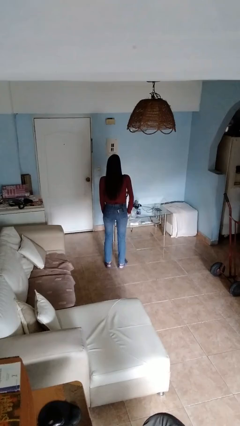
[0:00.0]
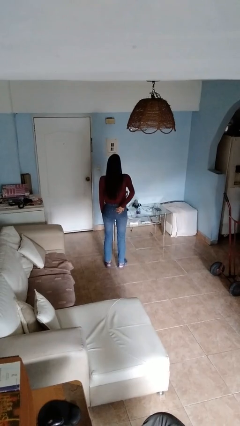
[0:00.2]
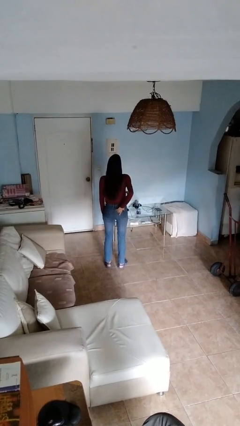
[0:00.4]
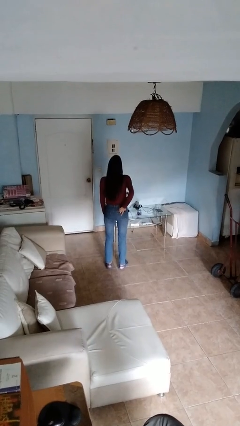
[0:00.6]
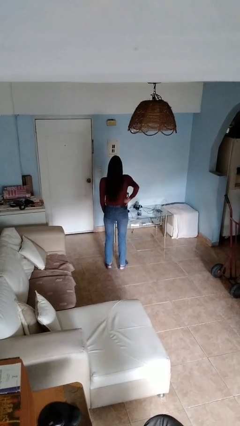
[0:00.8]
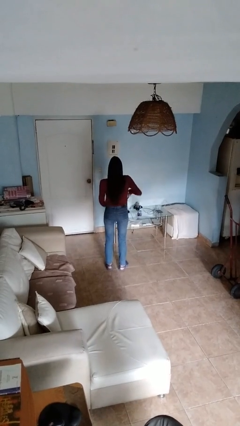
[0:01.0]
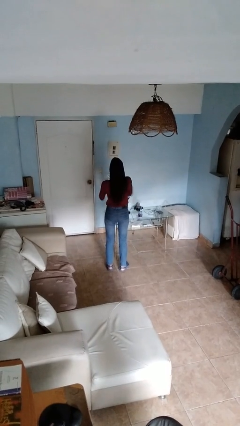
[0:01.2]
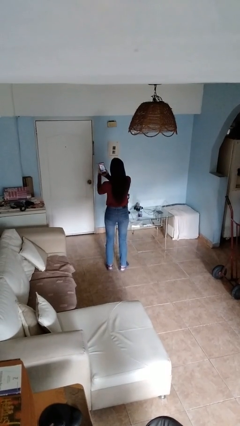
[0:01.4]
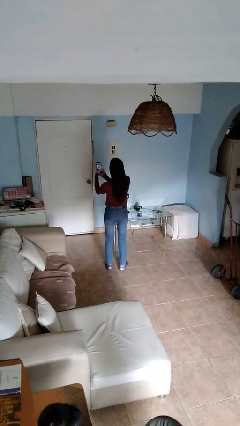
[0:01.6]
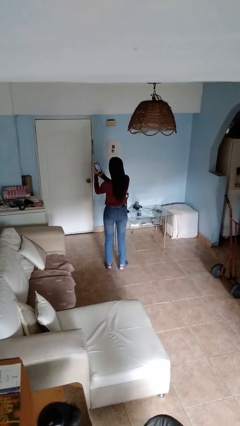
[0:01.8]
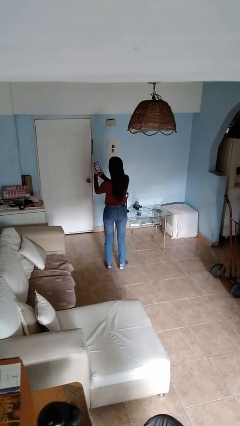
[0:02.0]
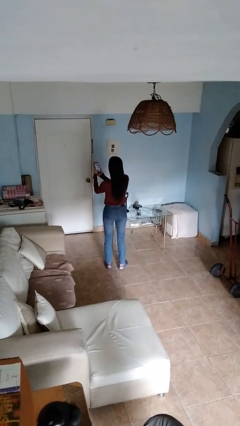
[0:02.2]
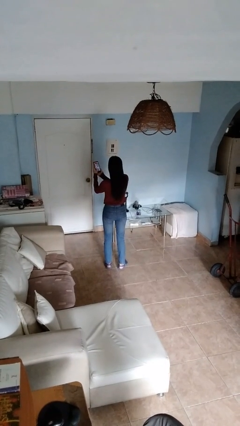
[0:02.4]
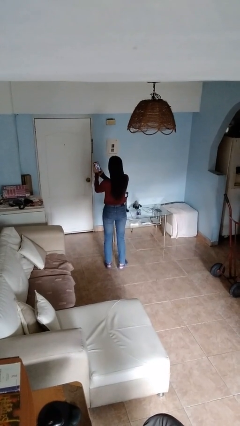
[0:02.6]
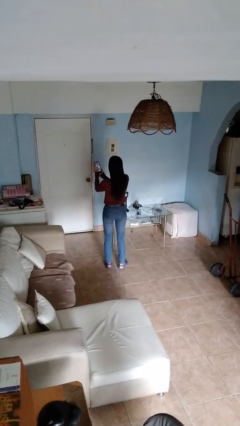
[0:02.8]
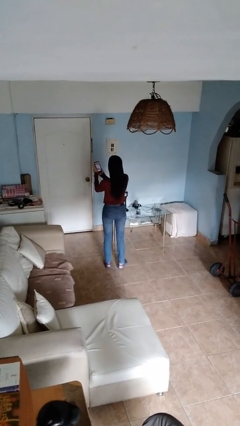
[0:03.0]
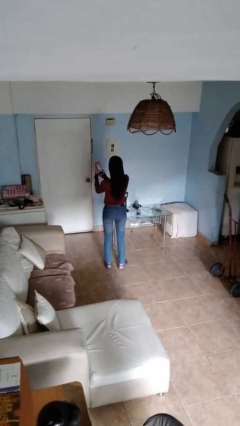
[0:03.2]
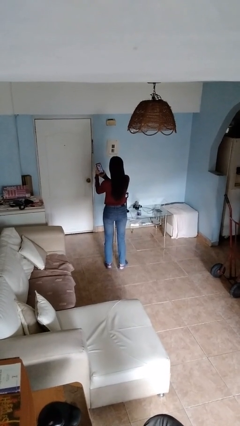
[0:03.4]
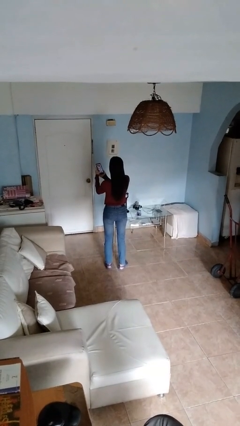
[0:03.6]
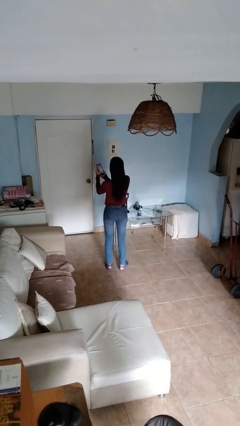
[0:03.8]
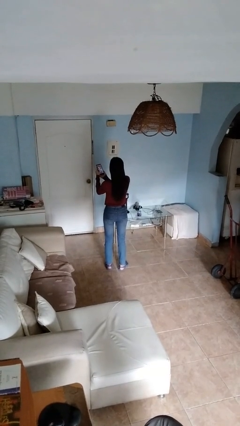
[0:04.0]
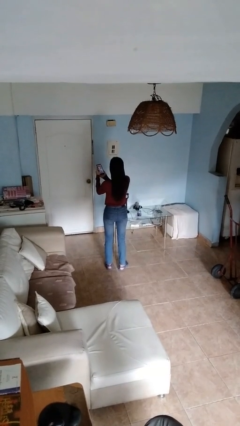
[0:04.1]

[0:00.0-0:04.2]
person takes phone from pocket

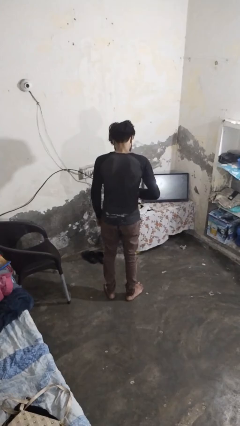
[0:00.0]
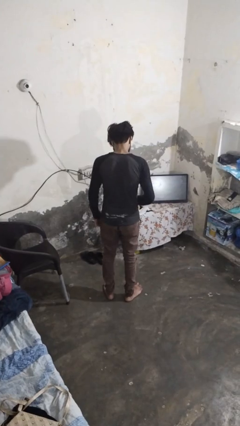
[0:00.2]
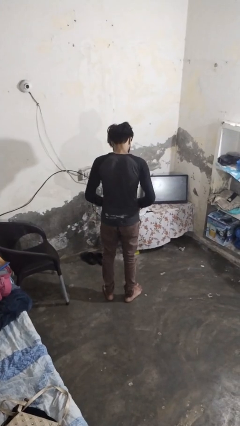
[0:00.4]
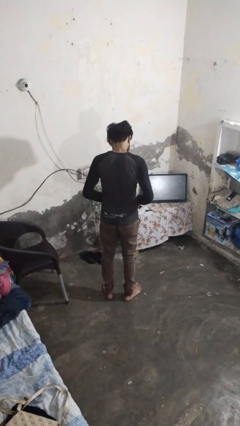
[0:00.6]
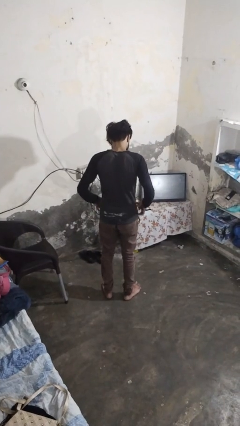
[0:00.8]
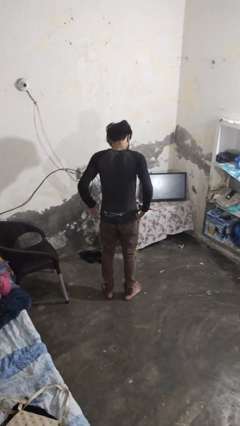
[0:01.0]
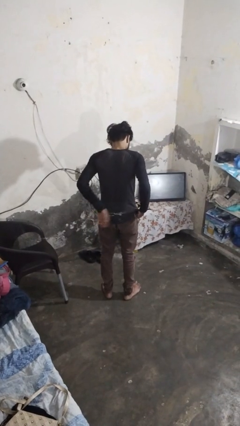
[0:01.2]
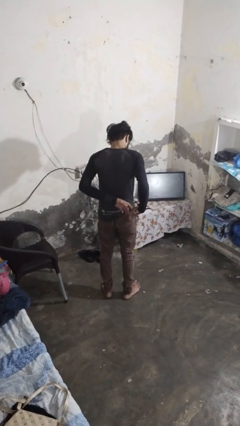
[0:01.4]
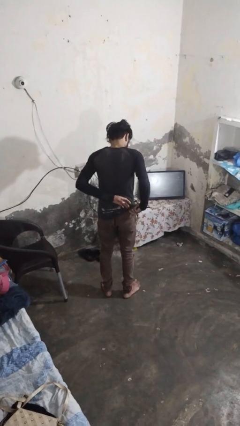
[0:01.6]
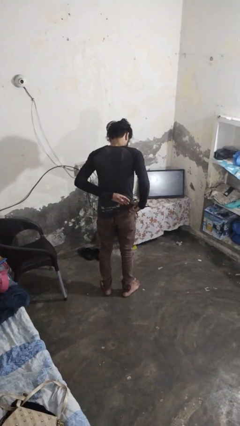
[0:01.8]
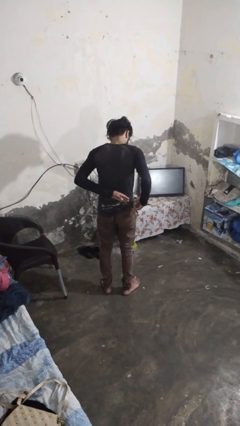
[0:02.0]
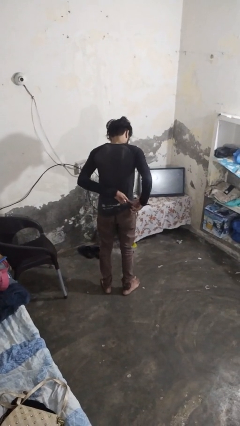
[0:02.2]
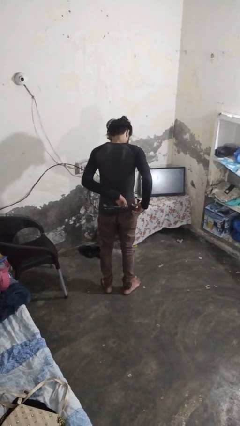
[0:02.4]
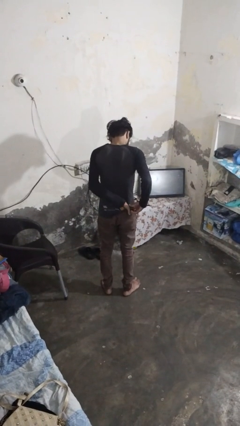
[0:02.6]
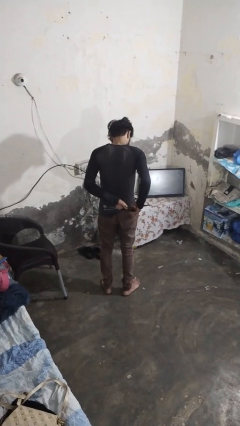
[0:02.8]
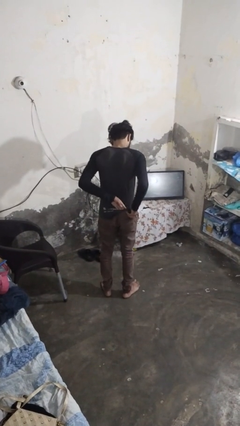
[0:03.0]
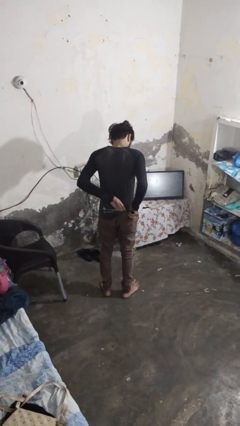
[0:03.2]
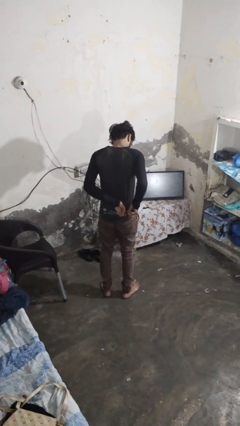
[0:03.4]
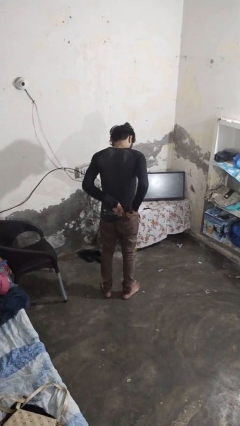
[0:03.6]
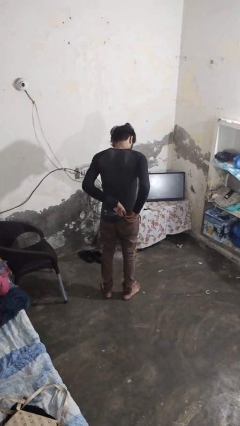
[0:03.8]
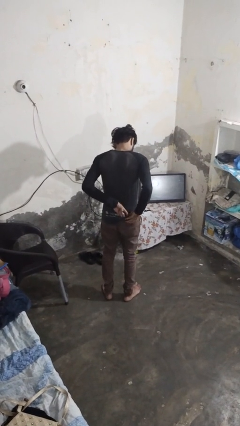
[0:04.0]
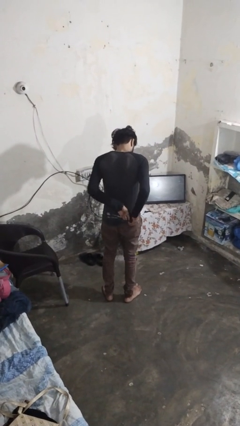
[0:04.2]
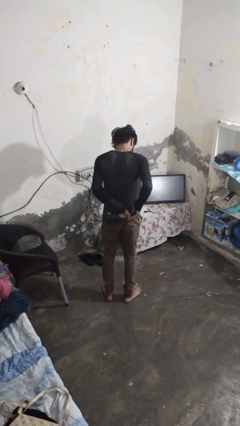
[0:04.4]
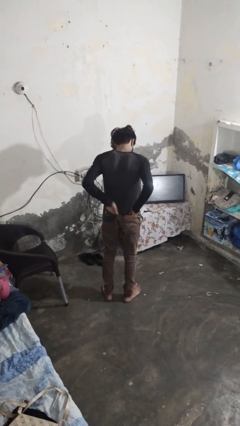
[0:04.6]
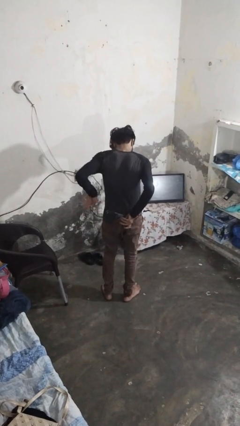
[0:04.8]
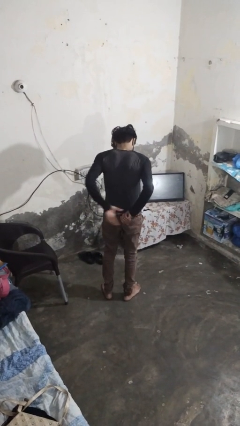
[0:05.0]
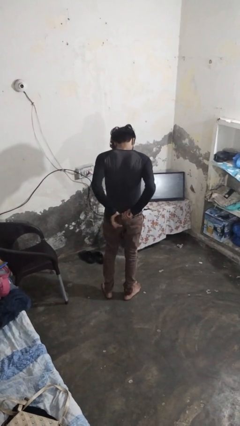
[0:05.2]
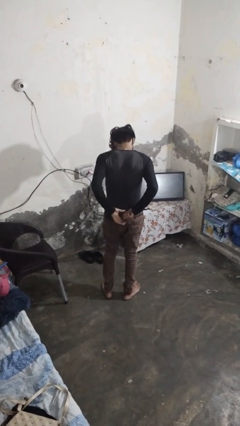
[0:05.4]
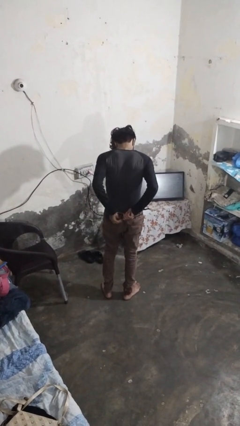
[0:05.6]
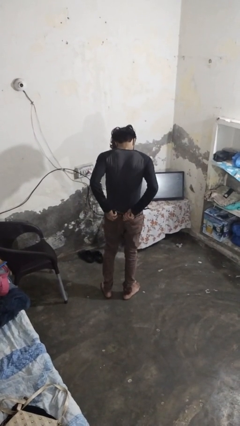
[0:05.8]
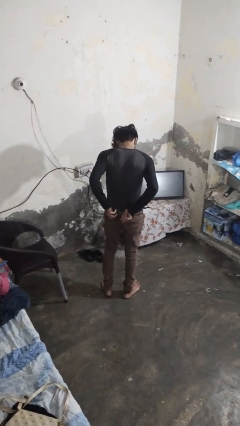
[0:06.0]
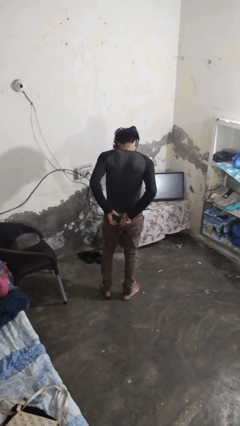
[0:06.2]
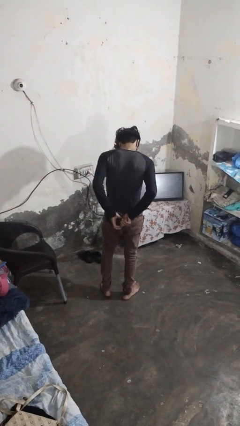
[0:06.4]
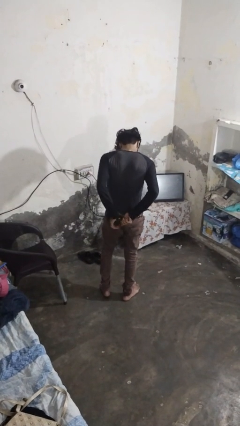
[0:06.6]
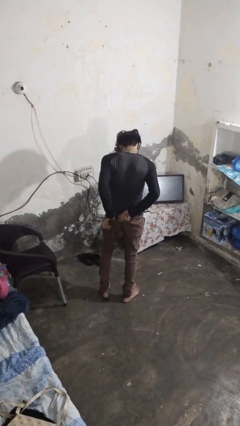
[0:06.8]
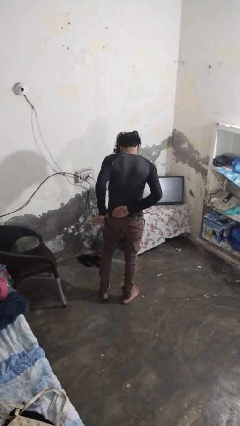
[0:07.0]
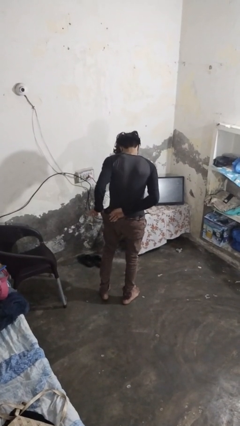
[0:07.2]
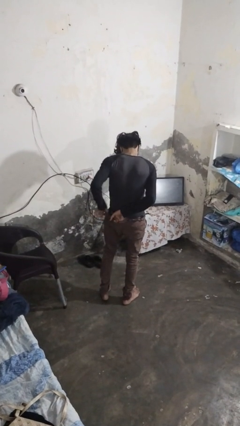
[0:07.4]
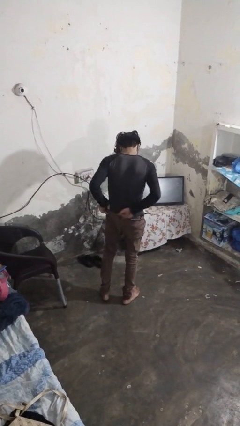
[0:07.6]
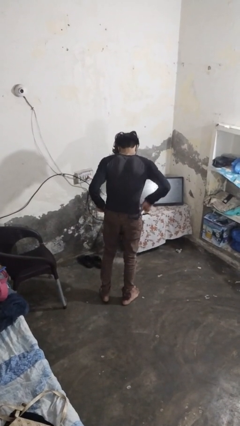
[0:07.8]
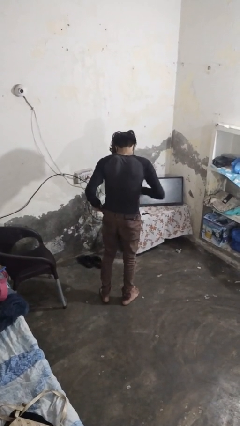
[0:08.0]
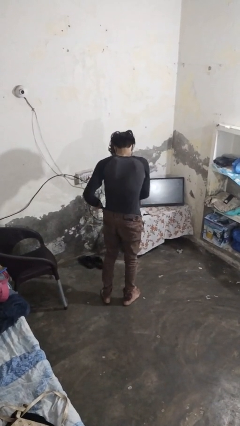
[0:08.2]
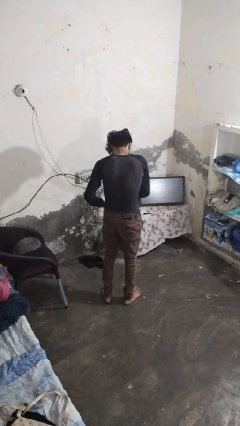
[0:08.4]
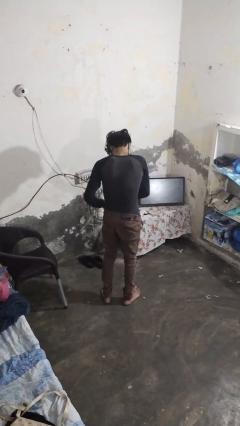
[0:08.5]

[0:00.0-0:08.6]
person tucks in shirt

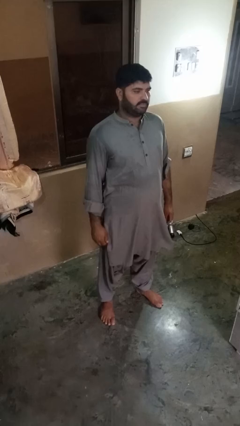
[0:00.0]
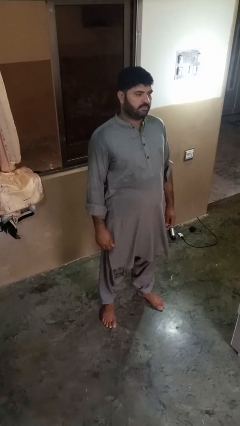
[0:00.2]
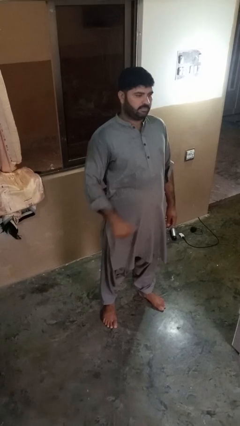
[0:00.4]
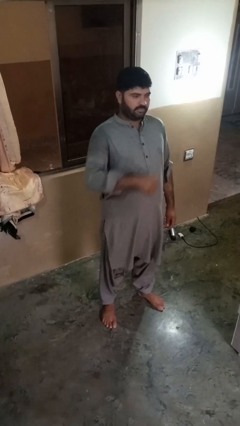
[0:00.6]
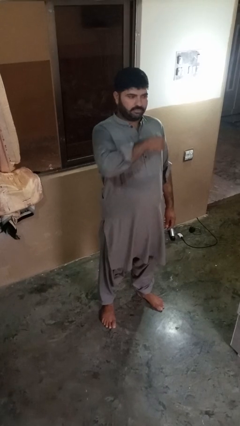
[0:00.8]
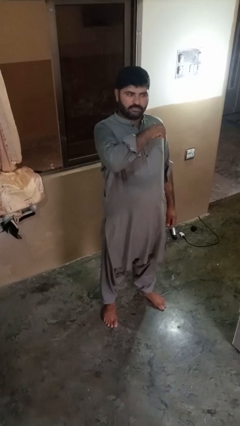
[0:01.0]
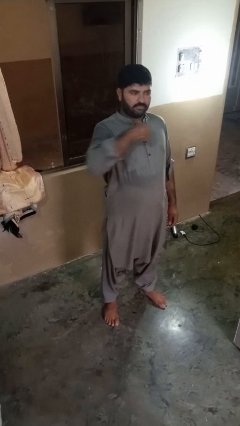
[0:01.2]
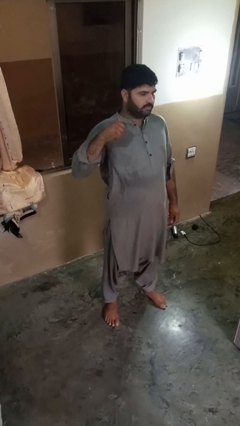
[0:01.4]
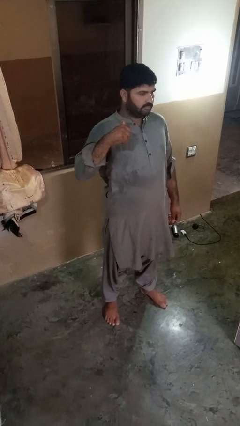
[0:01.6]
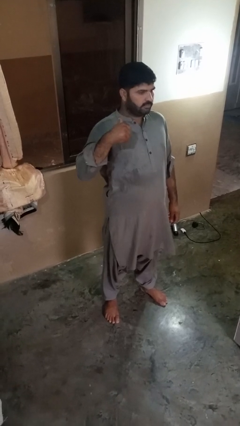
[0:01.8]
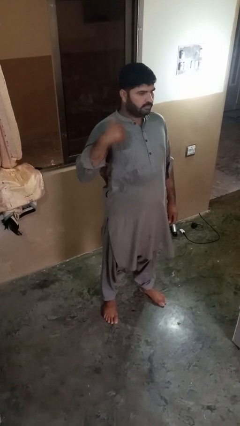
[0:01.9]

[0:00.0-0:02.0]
person gestures cut

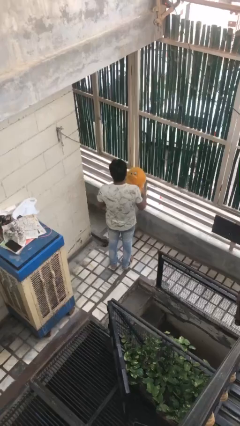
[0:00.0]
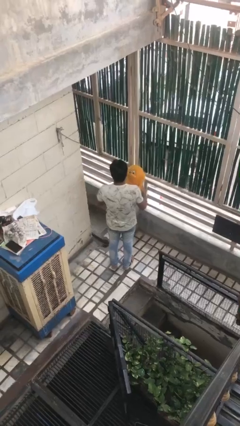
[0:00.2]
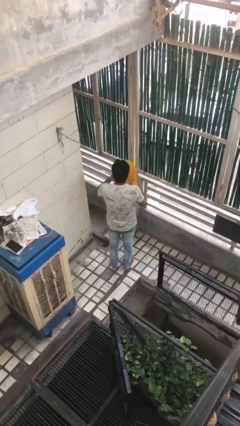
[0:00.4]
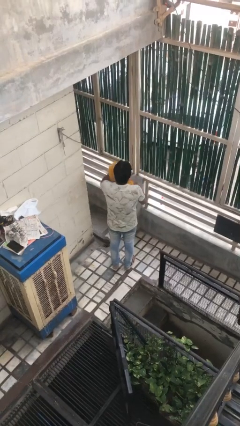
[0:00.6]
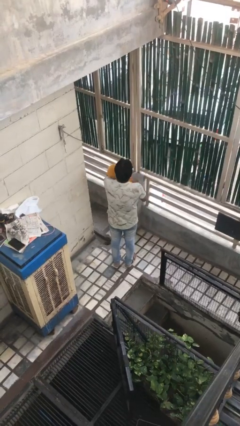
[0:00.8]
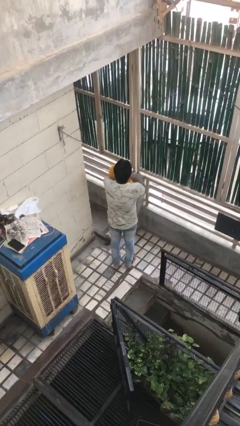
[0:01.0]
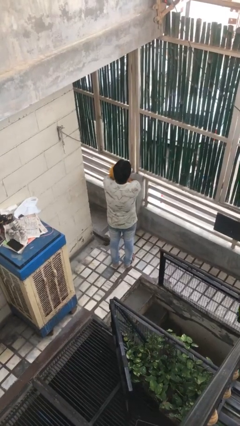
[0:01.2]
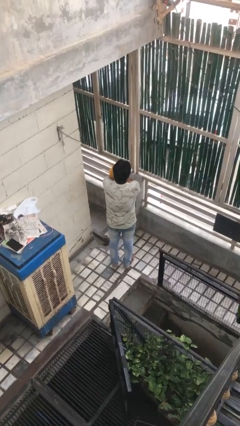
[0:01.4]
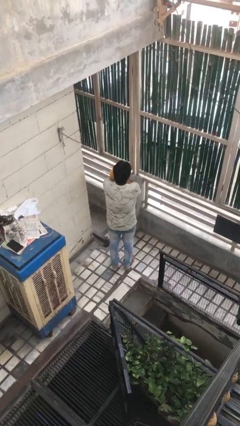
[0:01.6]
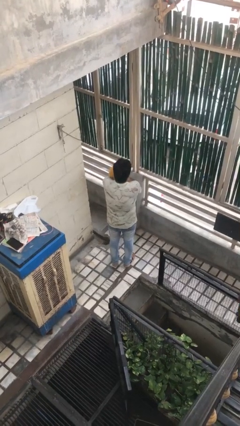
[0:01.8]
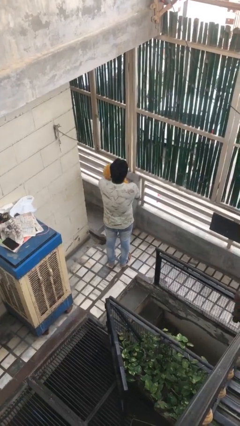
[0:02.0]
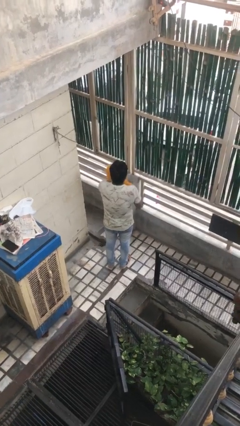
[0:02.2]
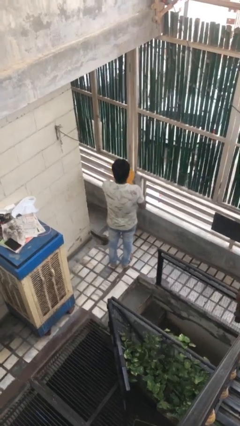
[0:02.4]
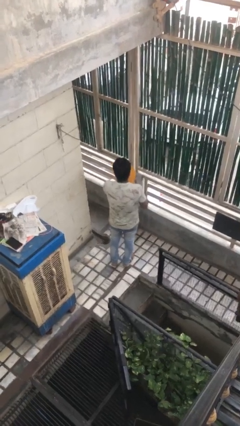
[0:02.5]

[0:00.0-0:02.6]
person hugs stuffed animal
